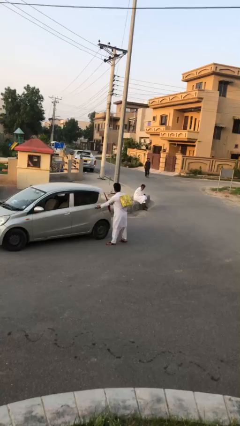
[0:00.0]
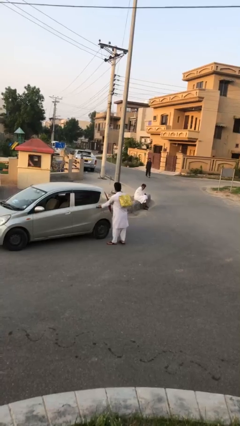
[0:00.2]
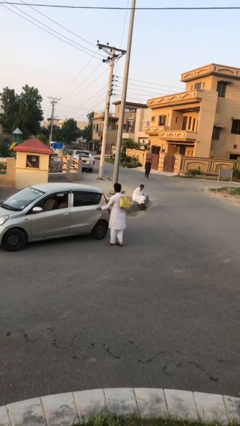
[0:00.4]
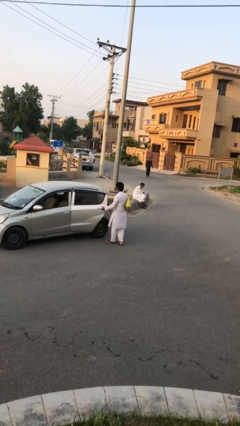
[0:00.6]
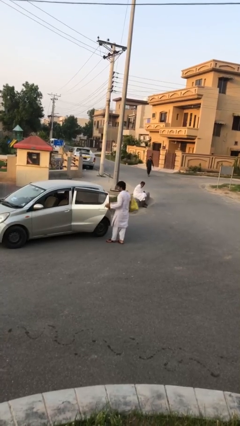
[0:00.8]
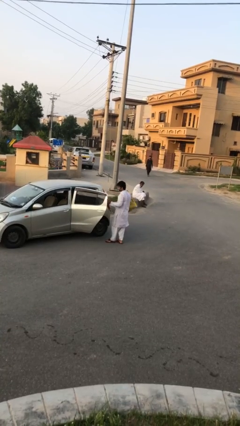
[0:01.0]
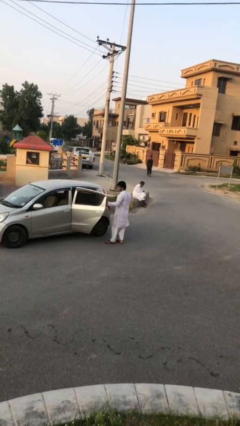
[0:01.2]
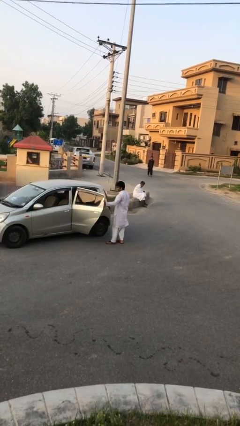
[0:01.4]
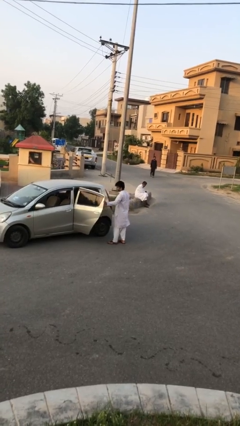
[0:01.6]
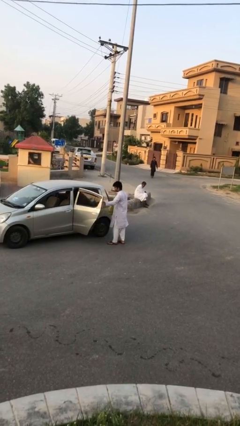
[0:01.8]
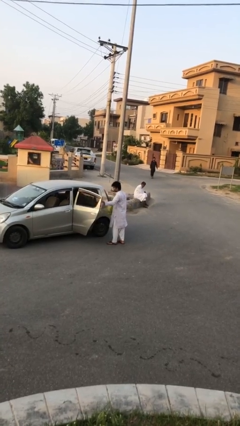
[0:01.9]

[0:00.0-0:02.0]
person opens car door
